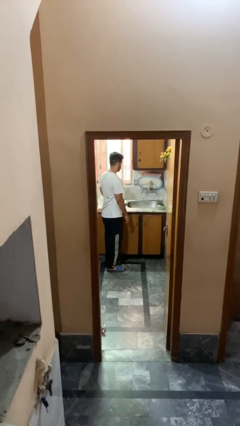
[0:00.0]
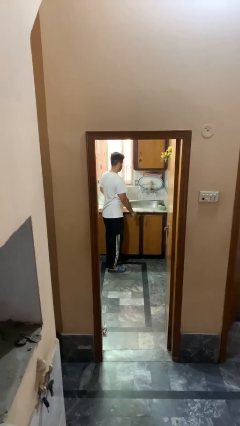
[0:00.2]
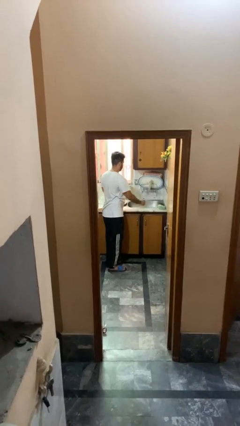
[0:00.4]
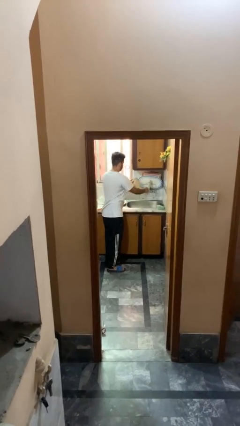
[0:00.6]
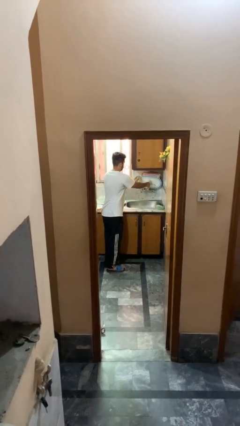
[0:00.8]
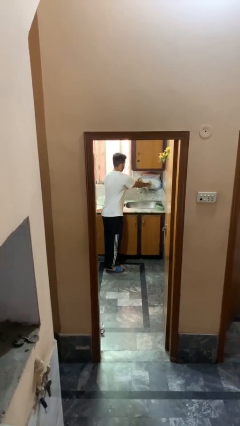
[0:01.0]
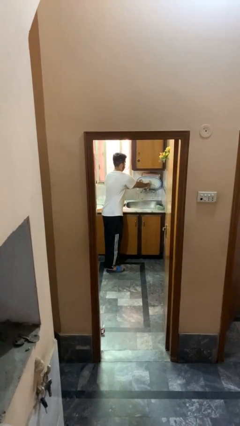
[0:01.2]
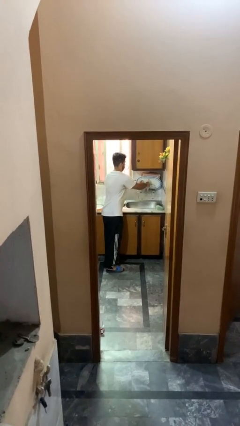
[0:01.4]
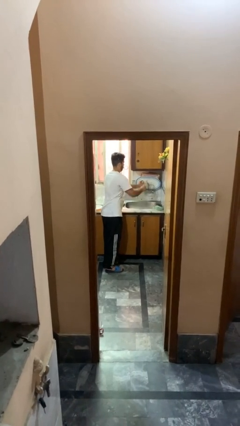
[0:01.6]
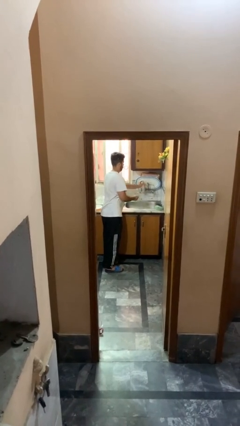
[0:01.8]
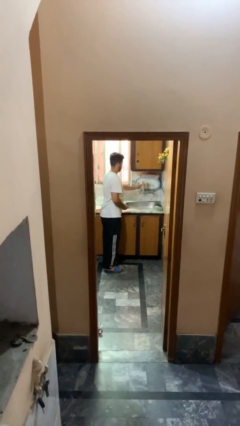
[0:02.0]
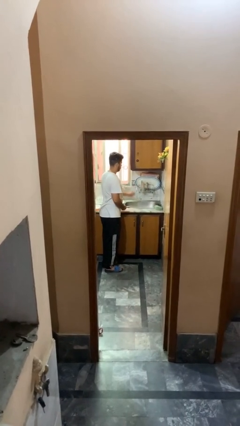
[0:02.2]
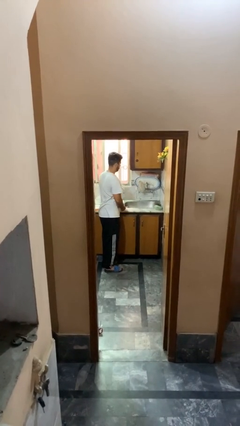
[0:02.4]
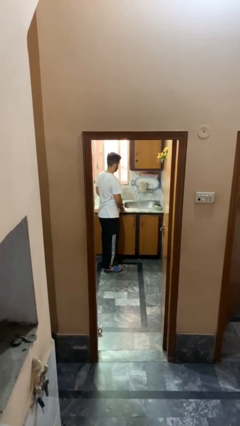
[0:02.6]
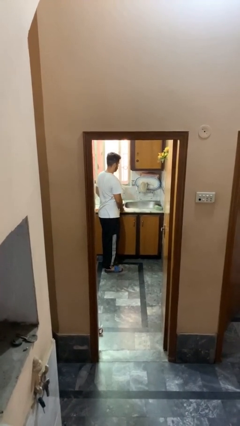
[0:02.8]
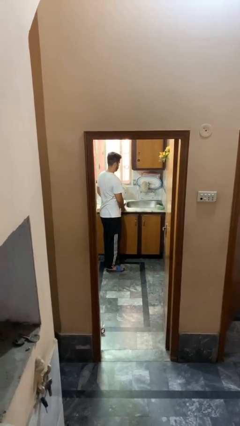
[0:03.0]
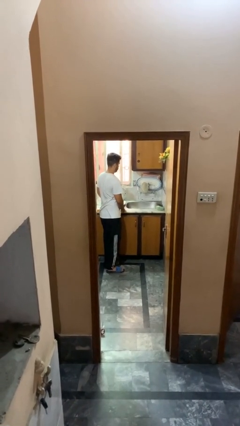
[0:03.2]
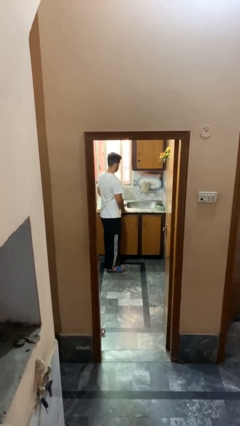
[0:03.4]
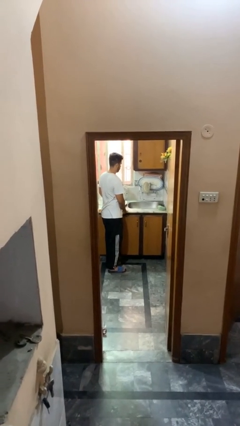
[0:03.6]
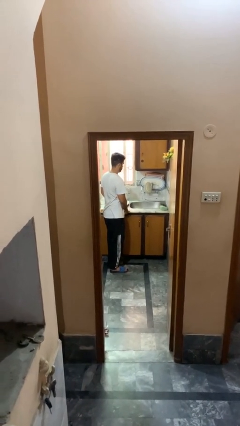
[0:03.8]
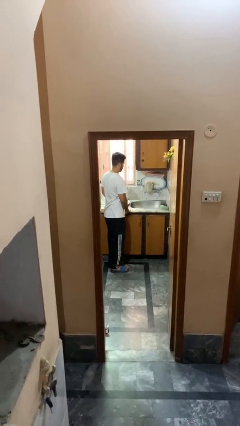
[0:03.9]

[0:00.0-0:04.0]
person loads dishwasher

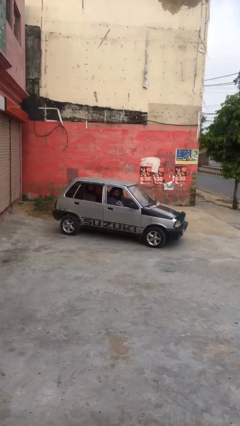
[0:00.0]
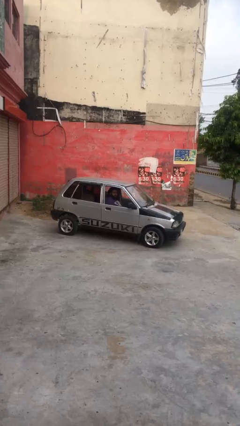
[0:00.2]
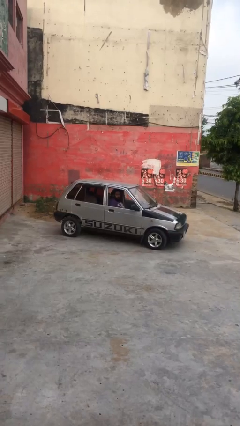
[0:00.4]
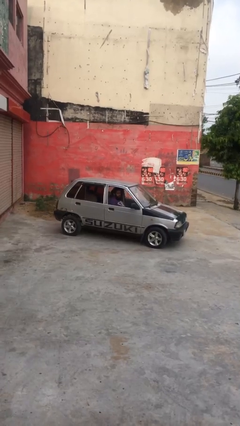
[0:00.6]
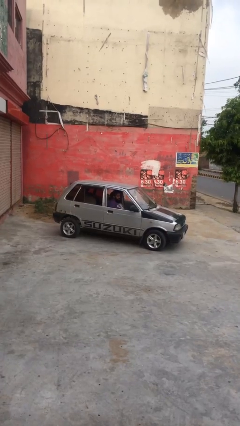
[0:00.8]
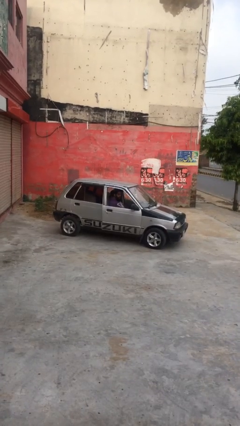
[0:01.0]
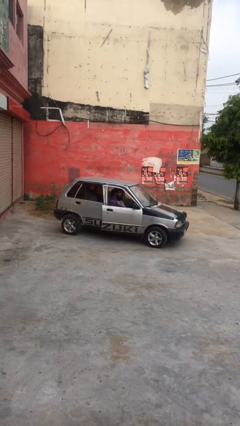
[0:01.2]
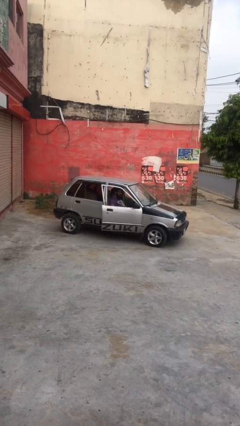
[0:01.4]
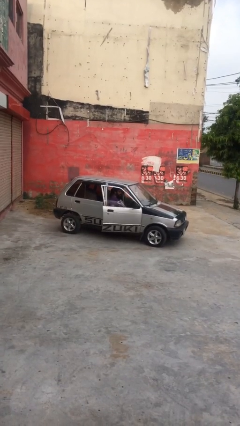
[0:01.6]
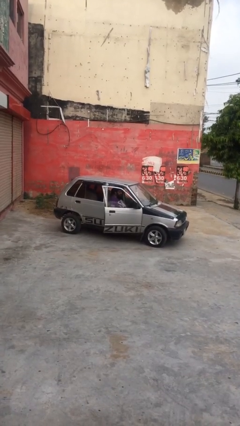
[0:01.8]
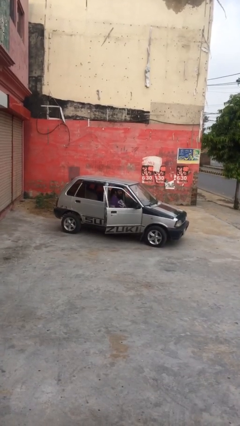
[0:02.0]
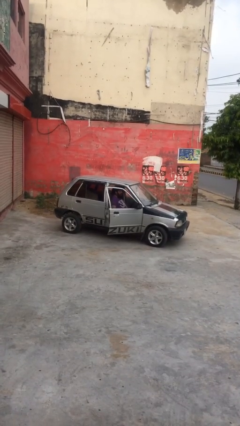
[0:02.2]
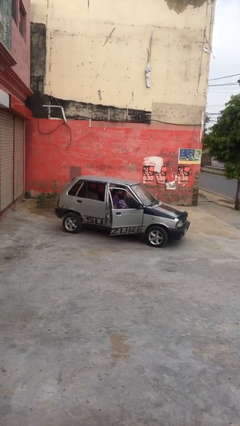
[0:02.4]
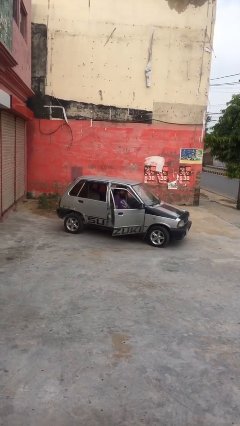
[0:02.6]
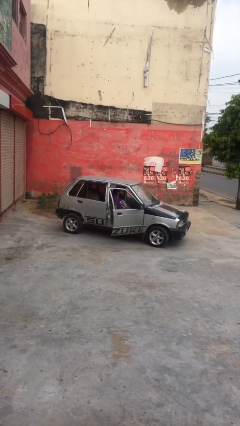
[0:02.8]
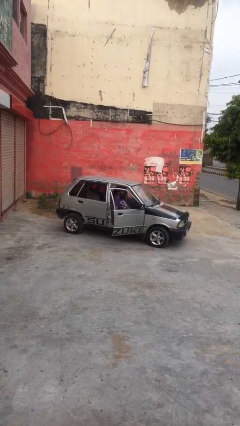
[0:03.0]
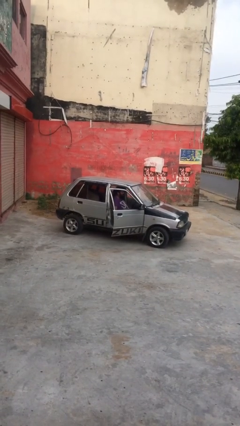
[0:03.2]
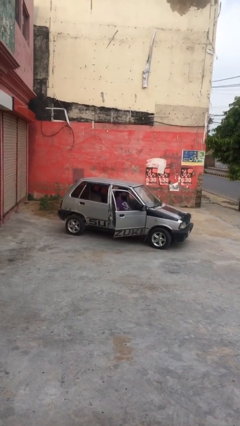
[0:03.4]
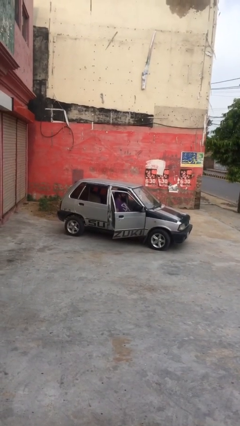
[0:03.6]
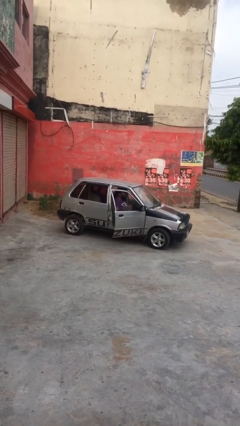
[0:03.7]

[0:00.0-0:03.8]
person opens car door

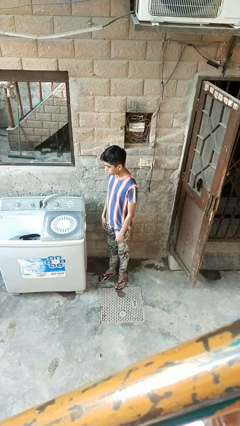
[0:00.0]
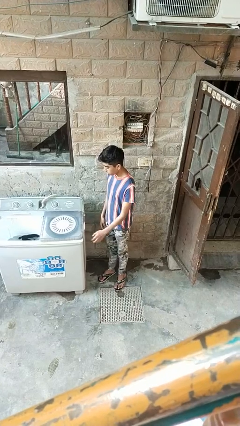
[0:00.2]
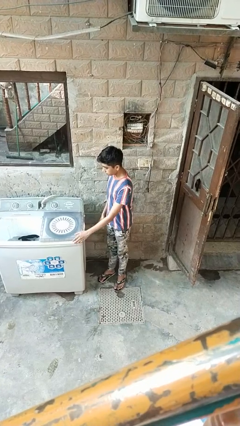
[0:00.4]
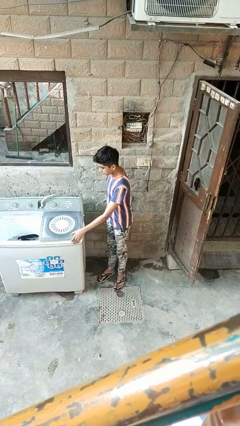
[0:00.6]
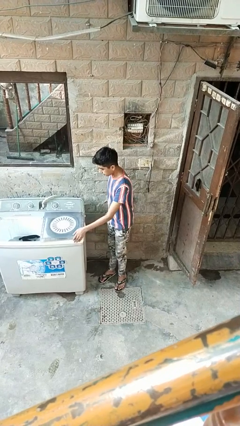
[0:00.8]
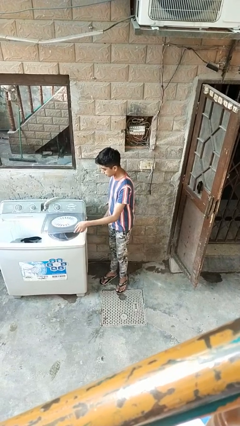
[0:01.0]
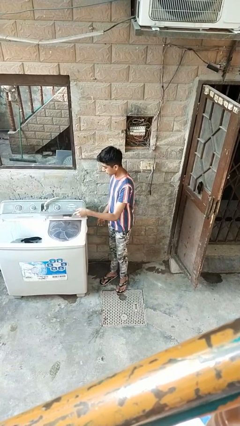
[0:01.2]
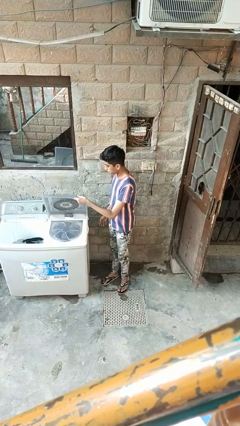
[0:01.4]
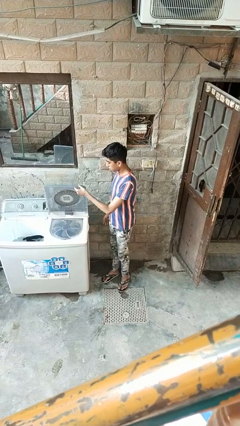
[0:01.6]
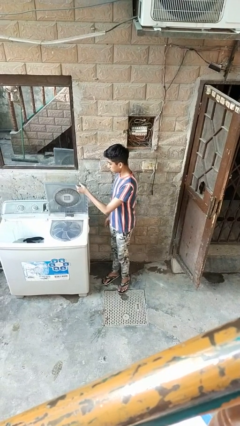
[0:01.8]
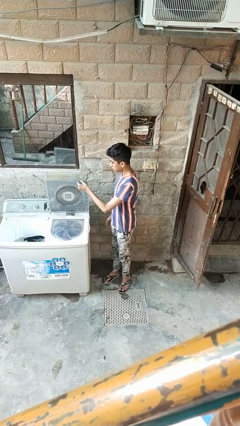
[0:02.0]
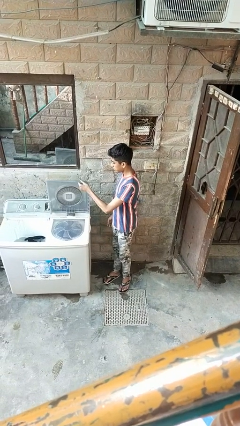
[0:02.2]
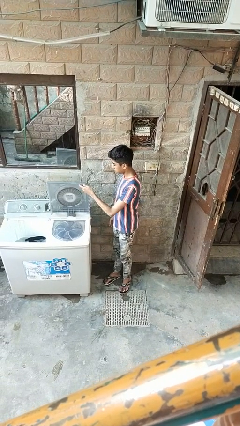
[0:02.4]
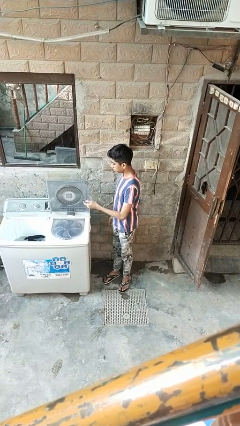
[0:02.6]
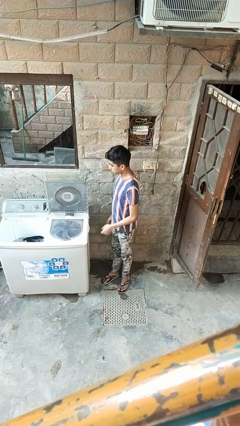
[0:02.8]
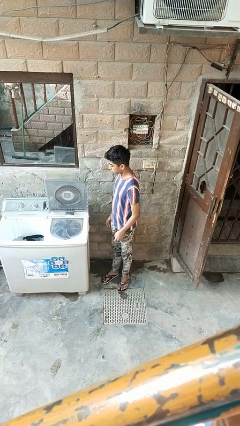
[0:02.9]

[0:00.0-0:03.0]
person opens clothes washer

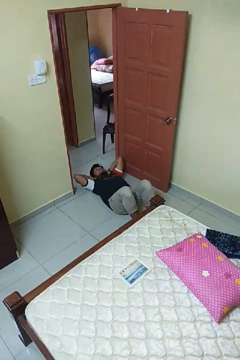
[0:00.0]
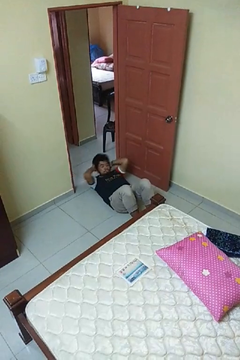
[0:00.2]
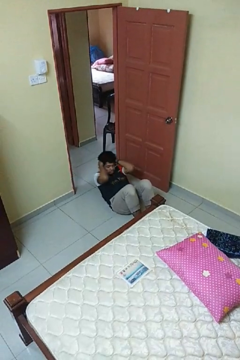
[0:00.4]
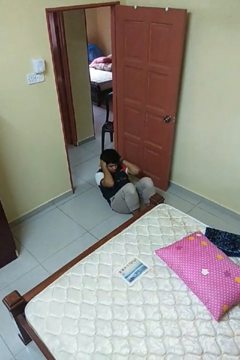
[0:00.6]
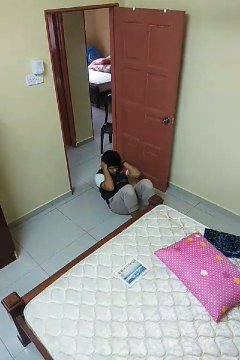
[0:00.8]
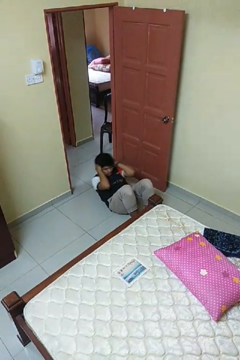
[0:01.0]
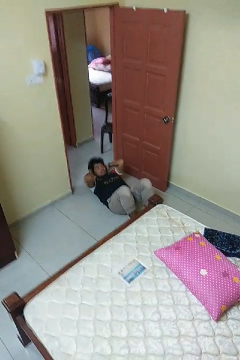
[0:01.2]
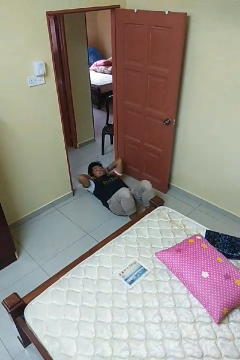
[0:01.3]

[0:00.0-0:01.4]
person exercises with situp

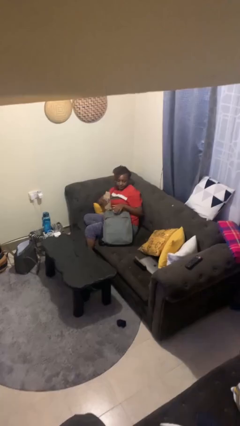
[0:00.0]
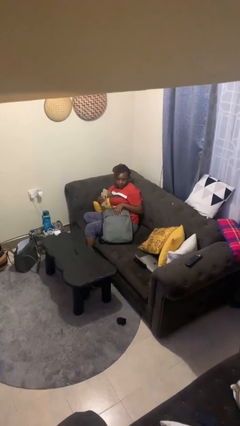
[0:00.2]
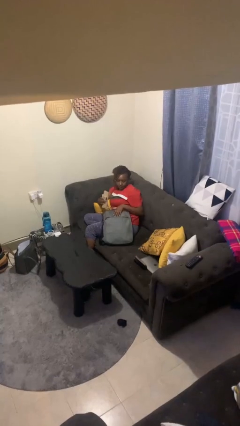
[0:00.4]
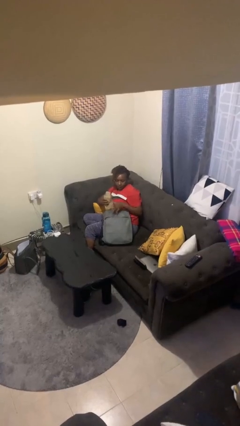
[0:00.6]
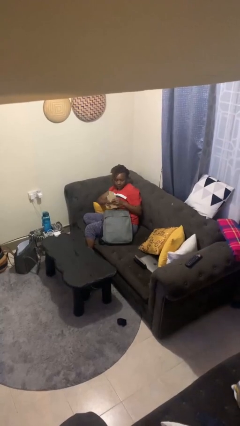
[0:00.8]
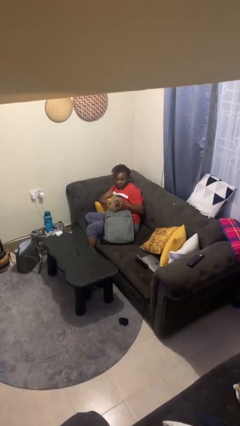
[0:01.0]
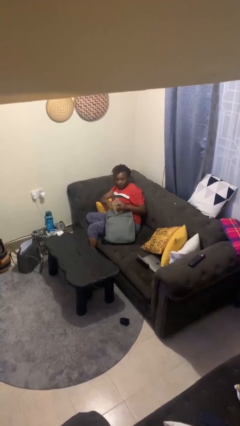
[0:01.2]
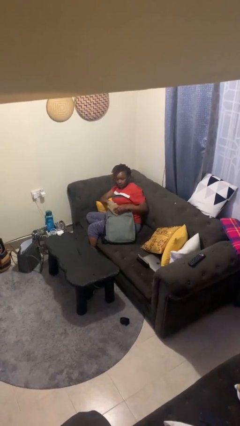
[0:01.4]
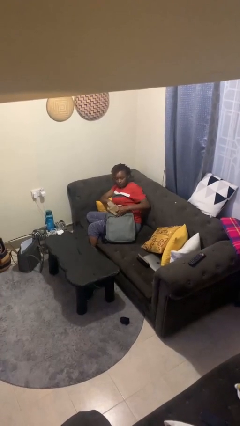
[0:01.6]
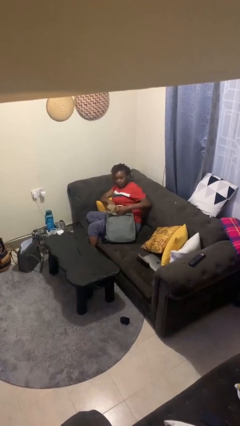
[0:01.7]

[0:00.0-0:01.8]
person puts object into backpack

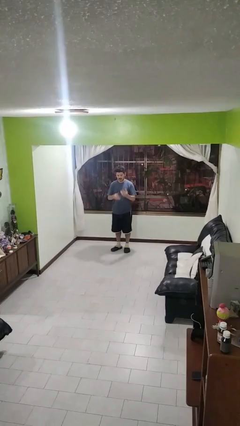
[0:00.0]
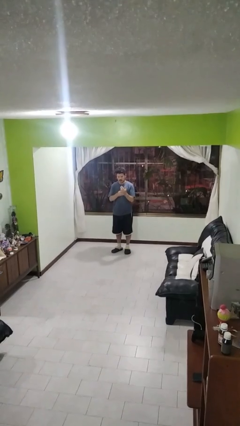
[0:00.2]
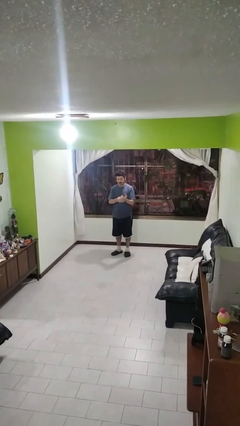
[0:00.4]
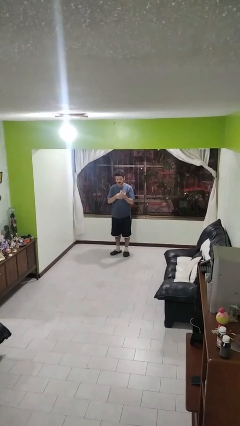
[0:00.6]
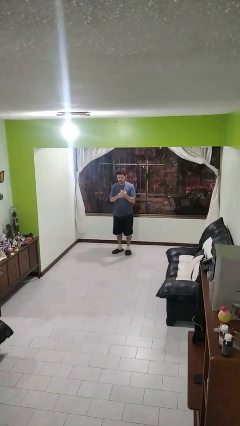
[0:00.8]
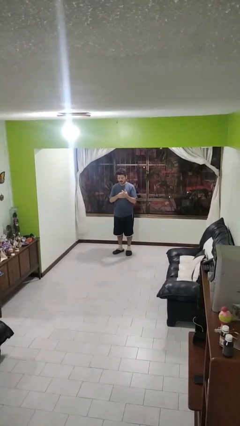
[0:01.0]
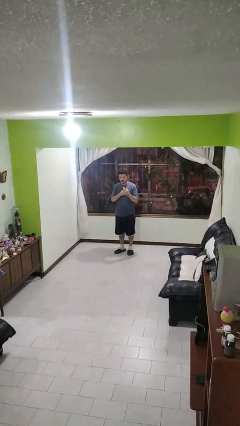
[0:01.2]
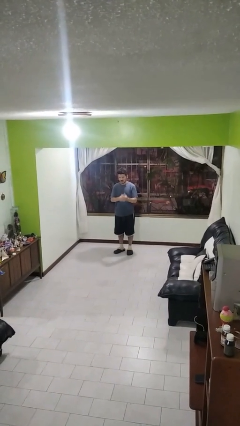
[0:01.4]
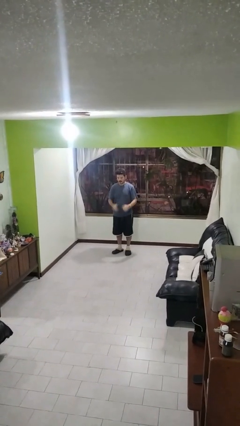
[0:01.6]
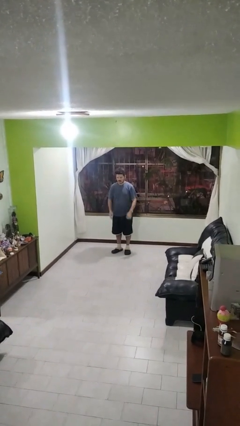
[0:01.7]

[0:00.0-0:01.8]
person snaps fingers

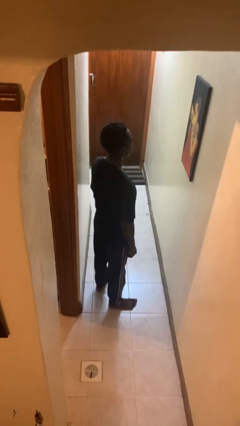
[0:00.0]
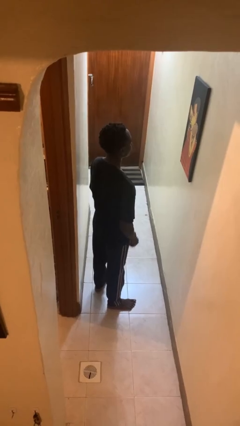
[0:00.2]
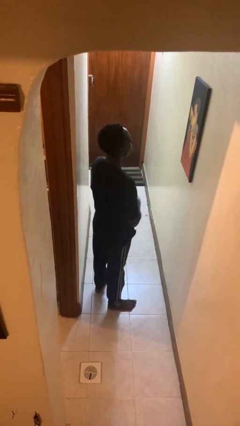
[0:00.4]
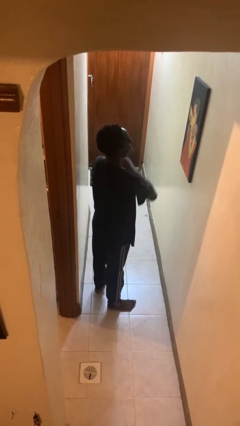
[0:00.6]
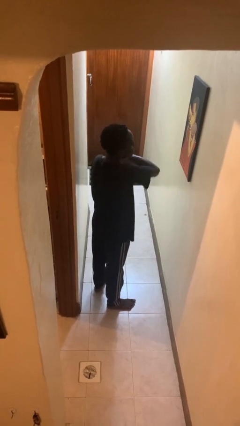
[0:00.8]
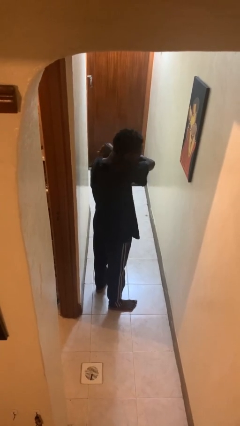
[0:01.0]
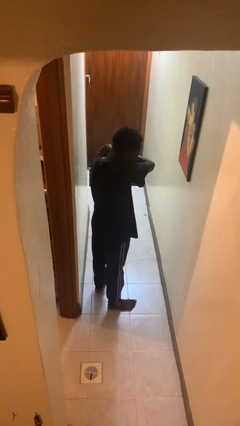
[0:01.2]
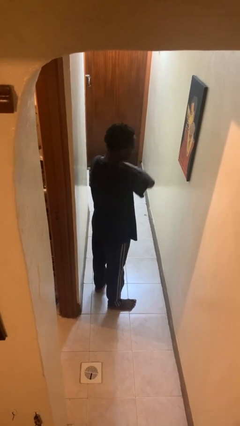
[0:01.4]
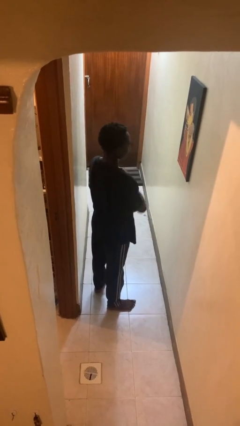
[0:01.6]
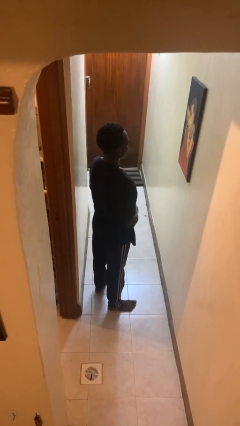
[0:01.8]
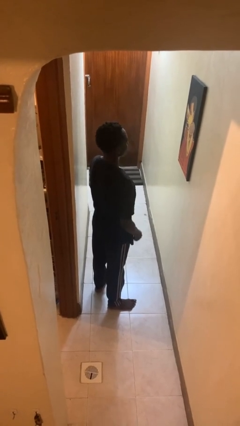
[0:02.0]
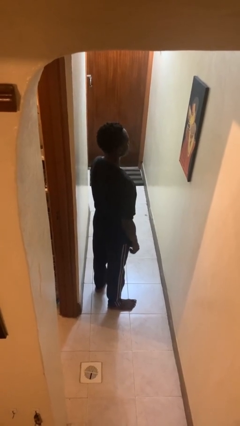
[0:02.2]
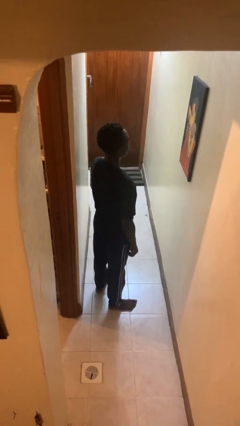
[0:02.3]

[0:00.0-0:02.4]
person sneezes into arm
